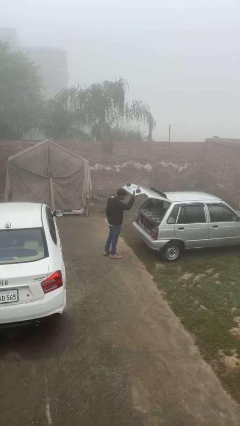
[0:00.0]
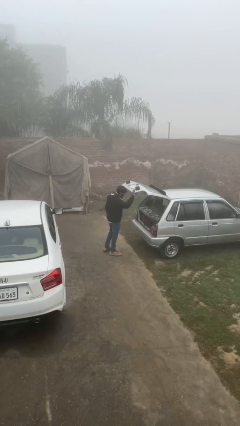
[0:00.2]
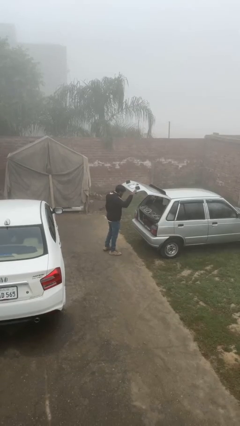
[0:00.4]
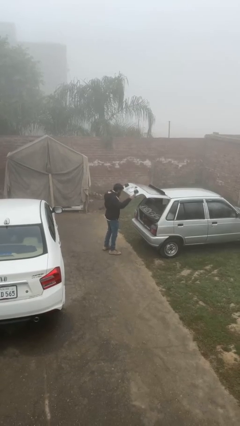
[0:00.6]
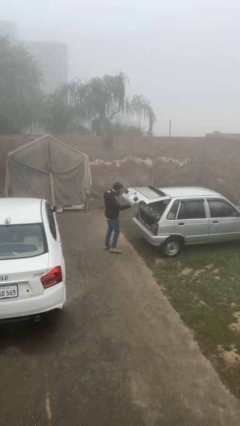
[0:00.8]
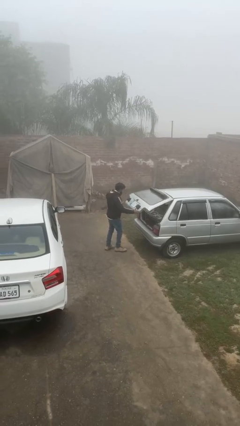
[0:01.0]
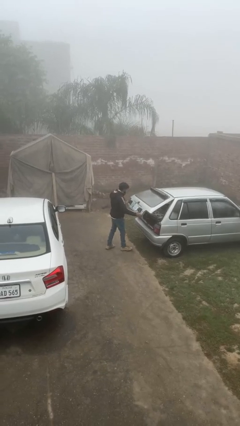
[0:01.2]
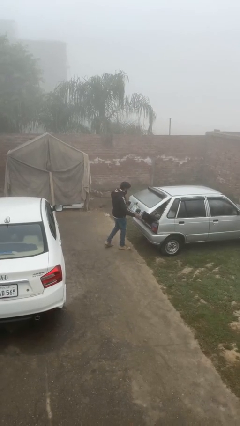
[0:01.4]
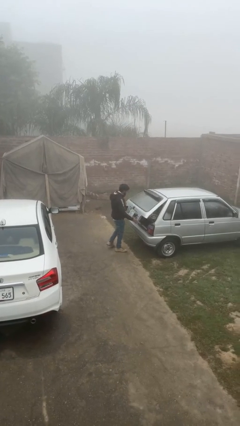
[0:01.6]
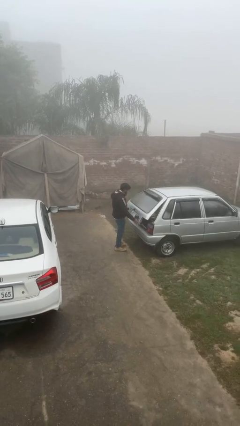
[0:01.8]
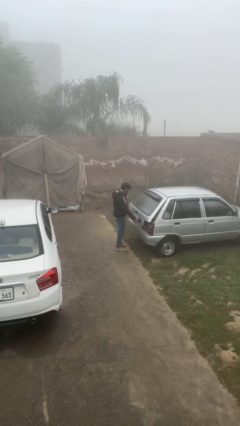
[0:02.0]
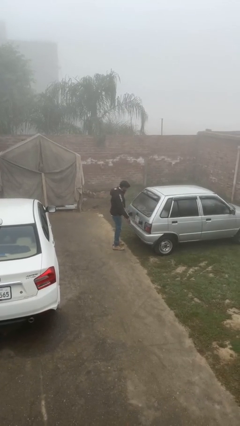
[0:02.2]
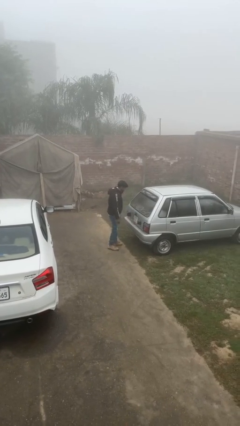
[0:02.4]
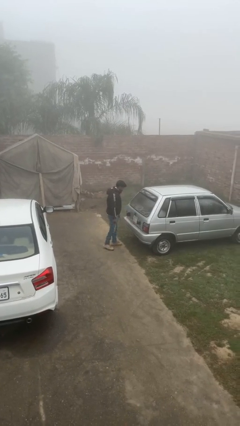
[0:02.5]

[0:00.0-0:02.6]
person closes car trunk

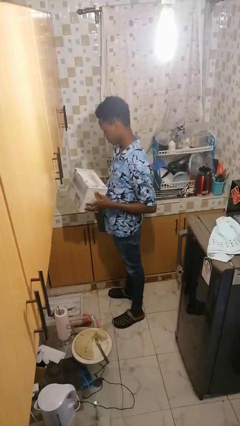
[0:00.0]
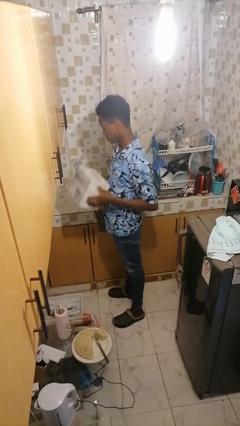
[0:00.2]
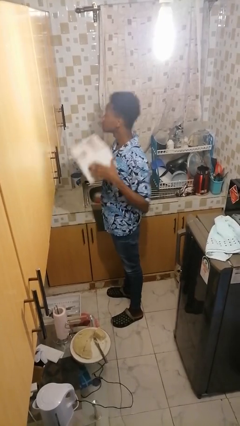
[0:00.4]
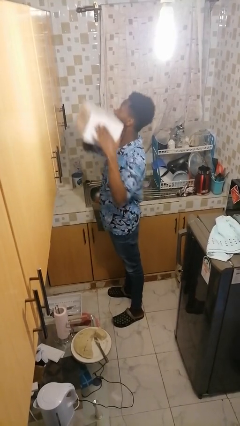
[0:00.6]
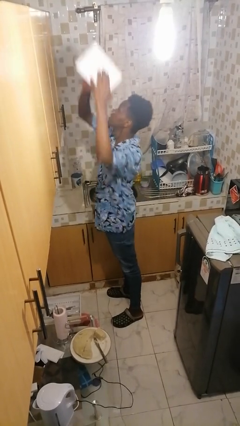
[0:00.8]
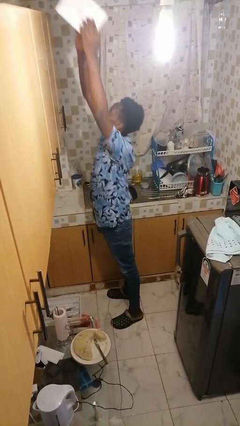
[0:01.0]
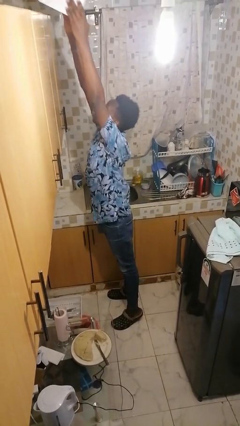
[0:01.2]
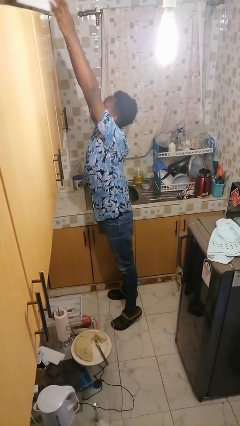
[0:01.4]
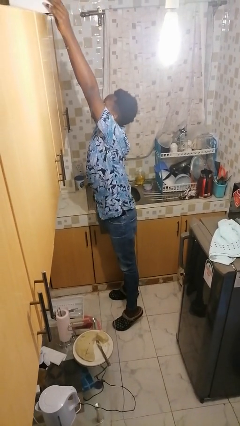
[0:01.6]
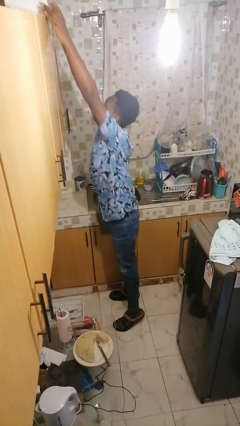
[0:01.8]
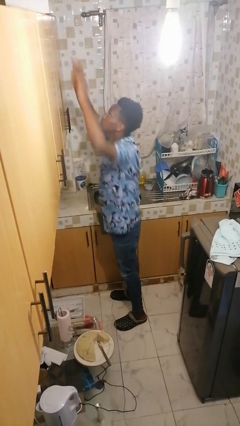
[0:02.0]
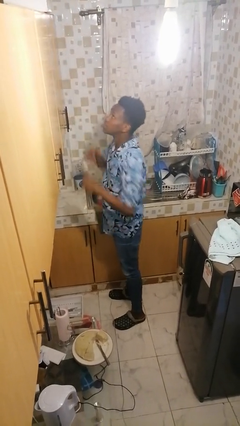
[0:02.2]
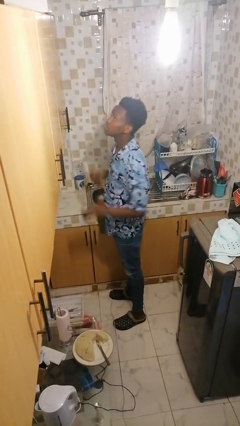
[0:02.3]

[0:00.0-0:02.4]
person puts down object on shelf

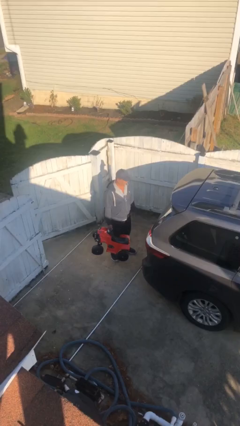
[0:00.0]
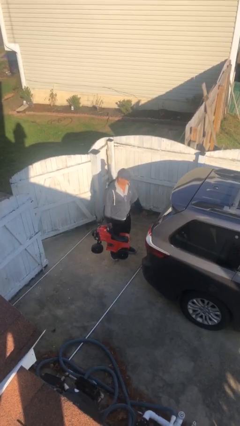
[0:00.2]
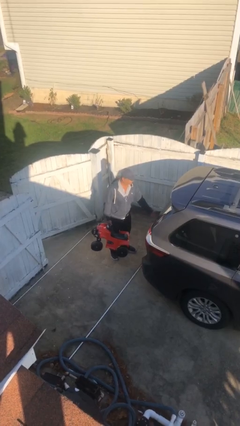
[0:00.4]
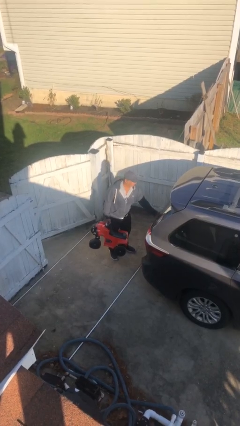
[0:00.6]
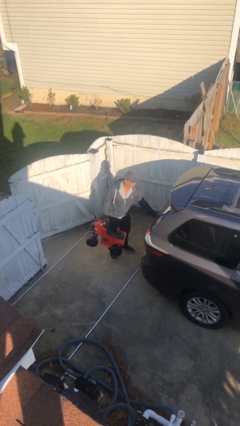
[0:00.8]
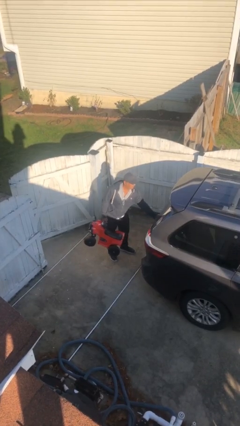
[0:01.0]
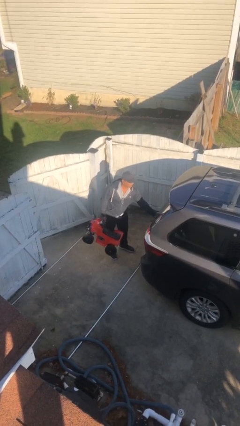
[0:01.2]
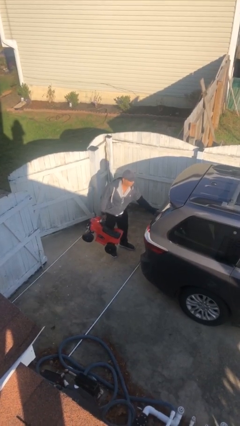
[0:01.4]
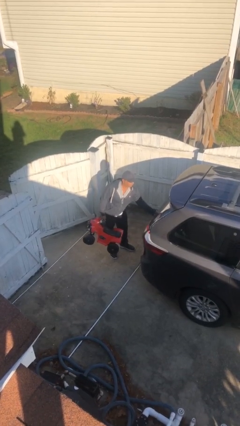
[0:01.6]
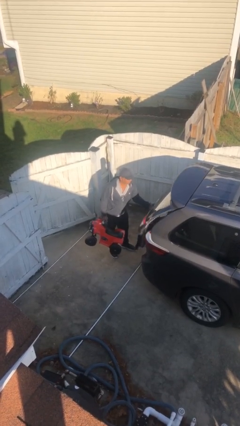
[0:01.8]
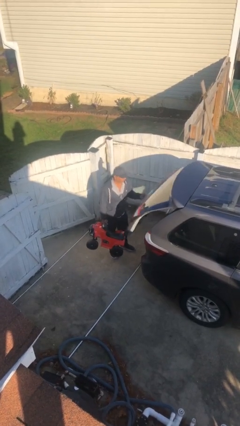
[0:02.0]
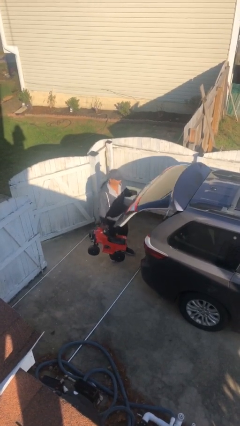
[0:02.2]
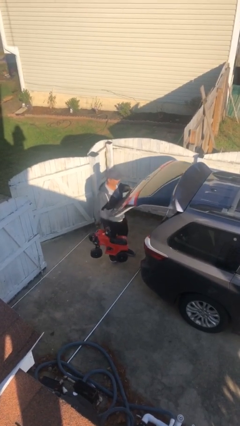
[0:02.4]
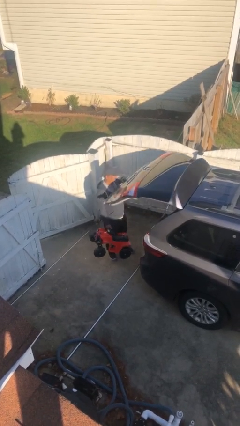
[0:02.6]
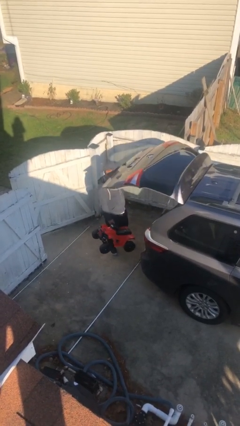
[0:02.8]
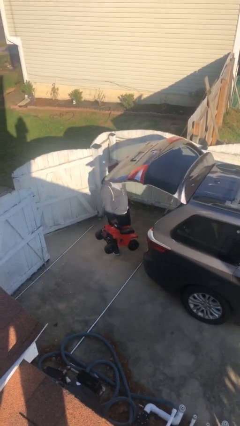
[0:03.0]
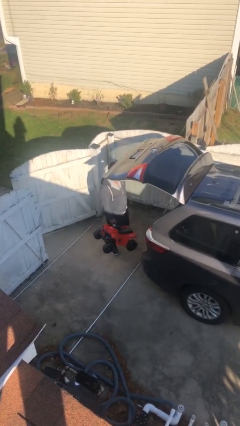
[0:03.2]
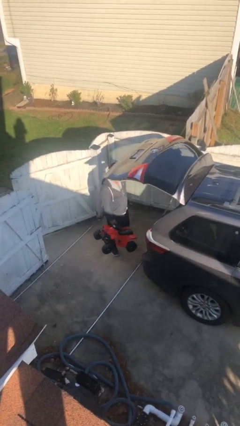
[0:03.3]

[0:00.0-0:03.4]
person opens car trunk

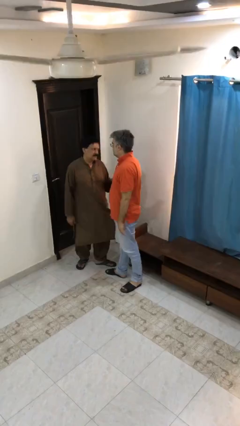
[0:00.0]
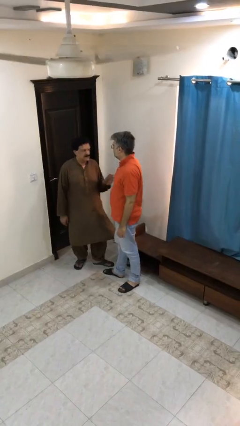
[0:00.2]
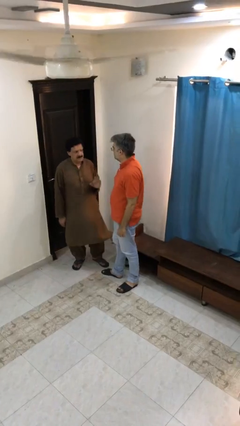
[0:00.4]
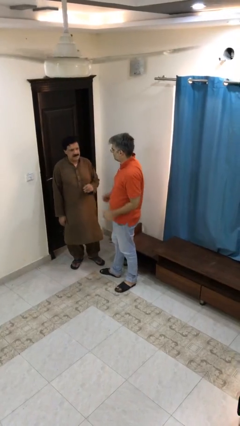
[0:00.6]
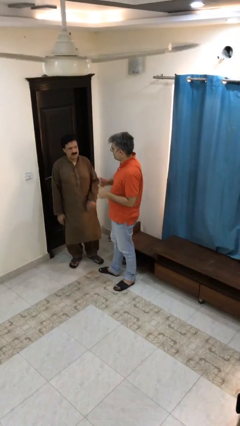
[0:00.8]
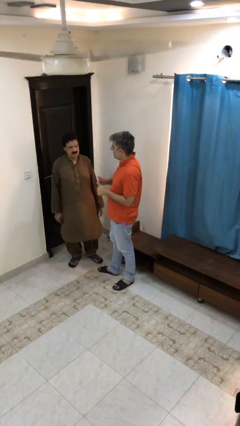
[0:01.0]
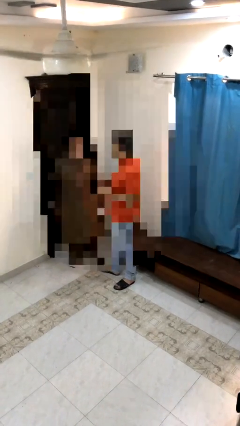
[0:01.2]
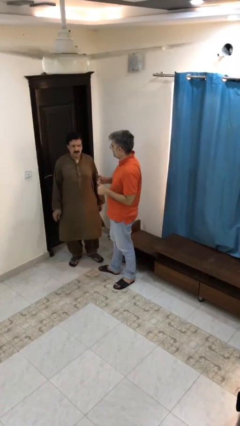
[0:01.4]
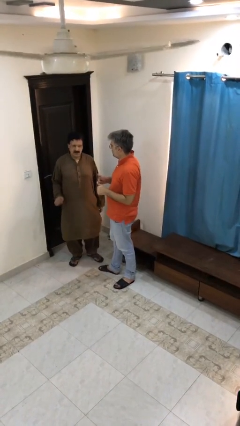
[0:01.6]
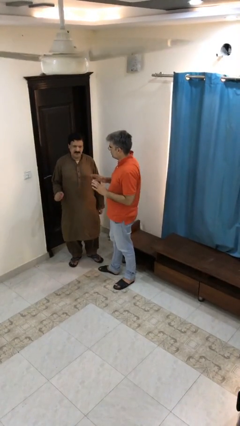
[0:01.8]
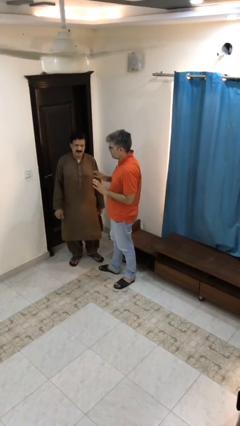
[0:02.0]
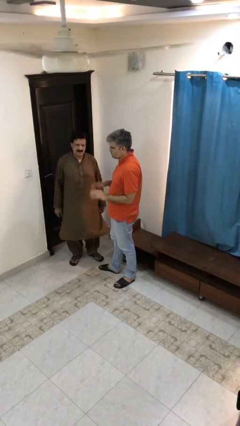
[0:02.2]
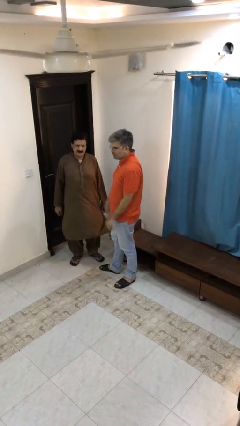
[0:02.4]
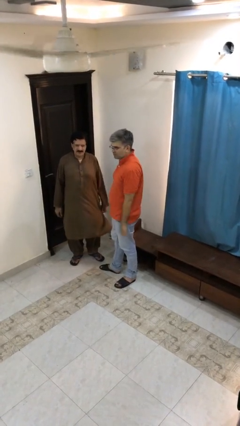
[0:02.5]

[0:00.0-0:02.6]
person talks to person

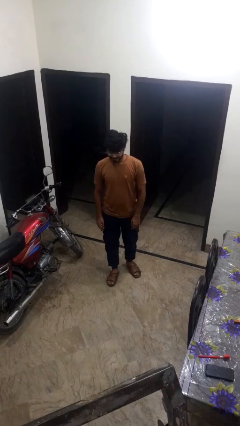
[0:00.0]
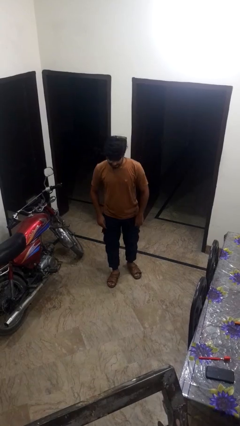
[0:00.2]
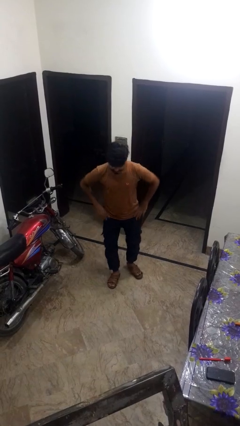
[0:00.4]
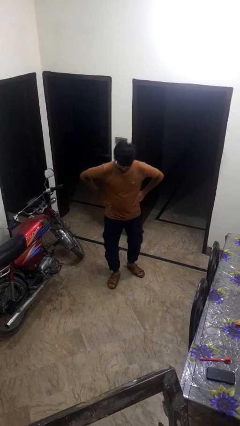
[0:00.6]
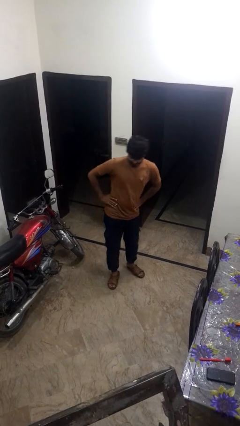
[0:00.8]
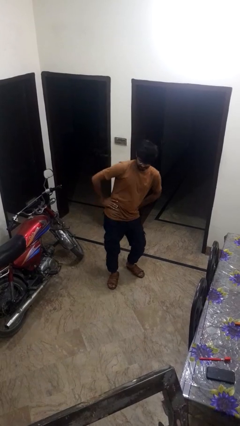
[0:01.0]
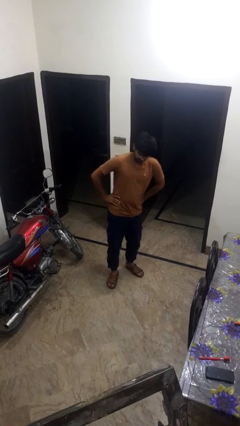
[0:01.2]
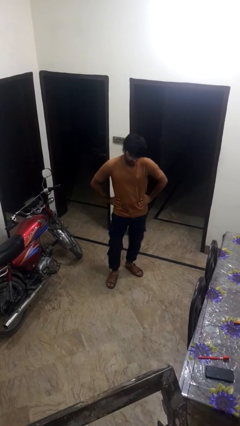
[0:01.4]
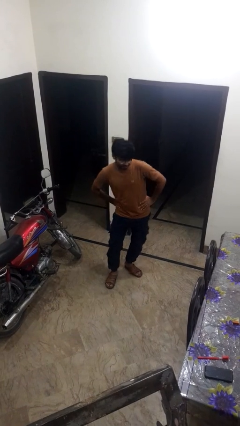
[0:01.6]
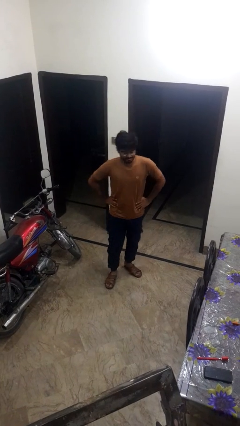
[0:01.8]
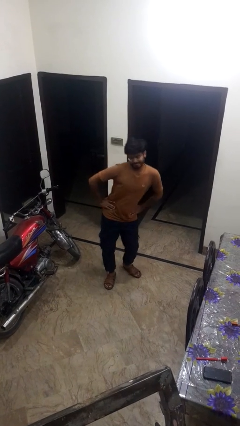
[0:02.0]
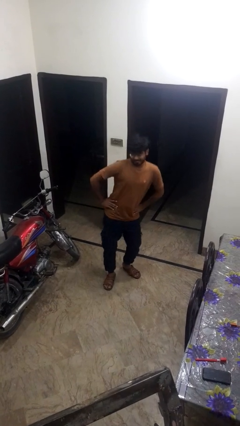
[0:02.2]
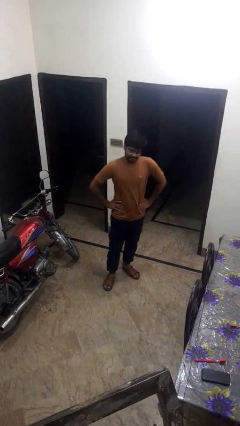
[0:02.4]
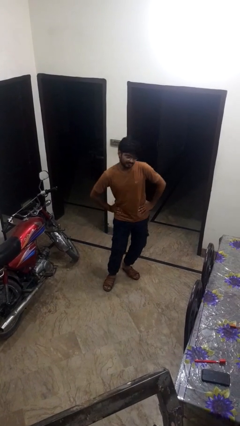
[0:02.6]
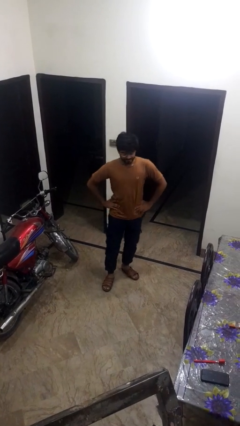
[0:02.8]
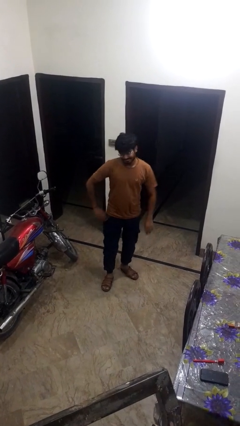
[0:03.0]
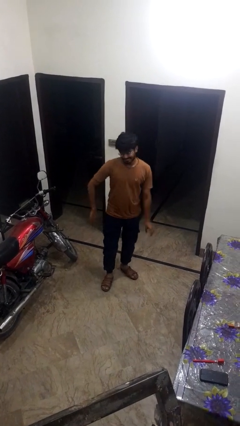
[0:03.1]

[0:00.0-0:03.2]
person dances in place

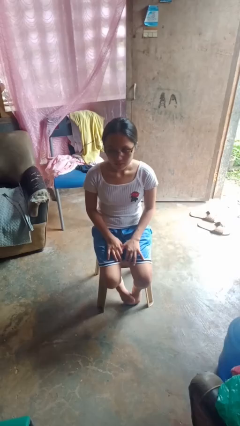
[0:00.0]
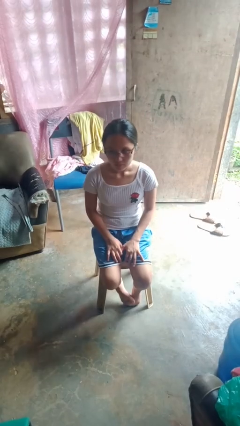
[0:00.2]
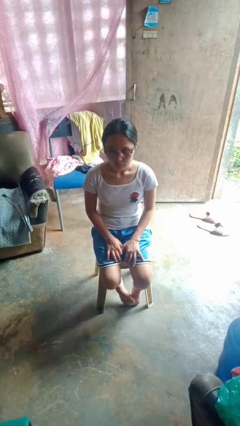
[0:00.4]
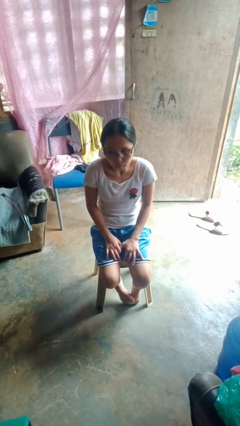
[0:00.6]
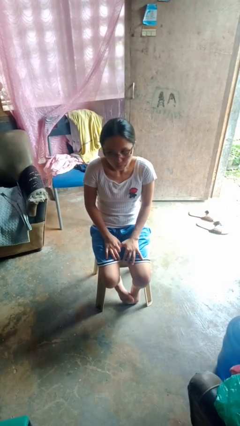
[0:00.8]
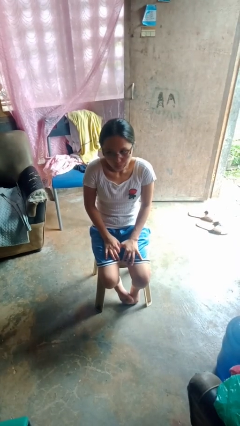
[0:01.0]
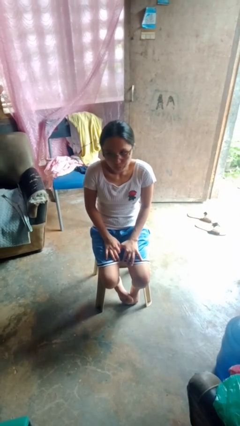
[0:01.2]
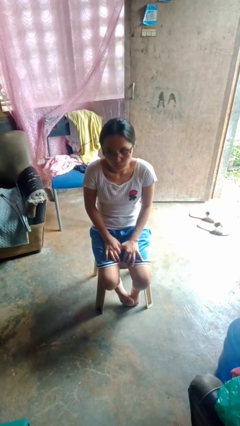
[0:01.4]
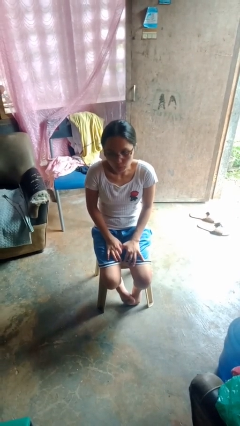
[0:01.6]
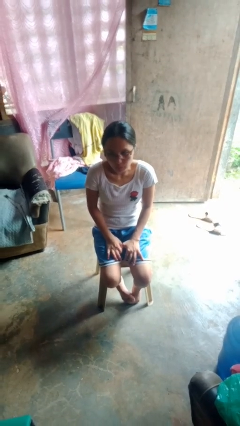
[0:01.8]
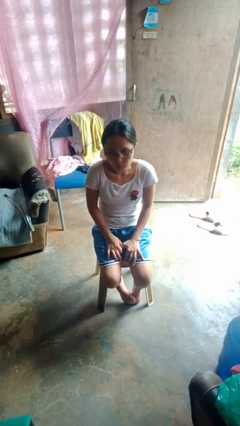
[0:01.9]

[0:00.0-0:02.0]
person shrugs

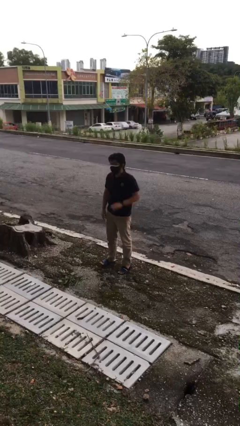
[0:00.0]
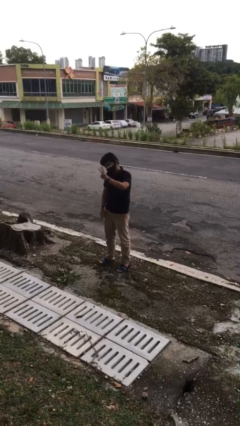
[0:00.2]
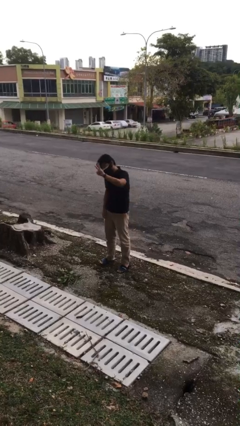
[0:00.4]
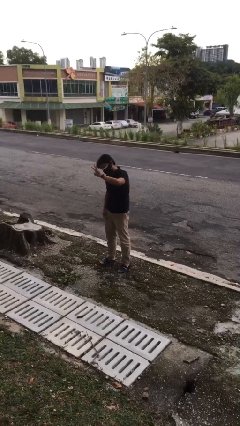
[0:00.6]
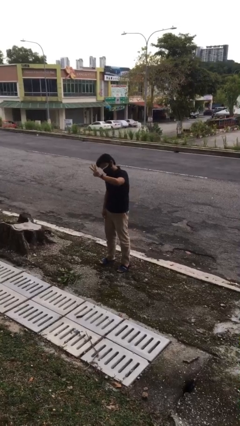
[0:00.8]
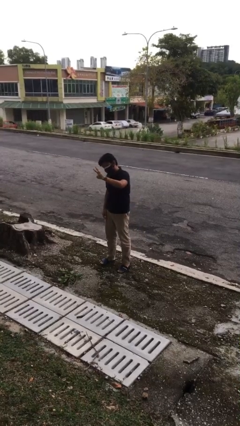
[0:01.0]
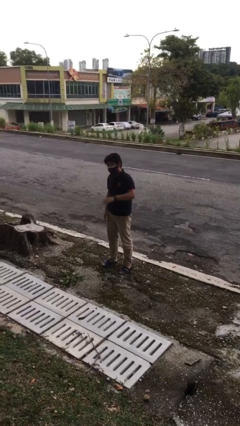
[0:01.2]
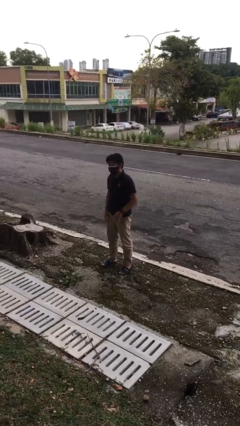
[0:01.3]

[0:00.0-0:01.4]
person gestures number three
